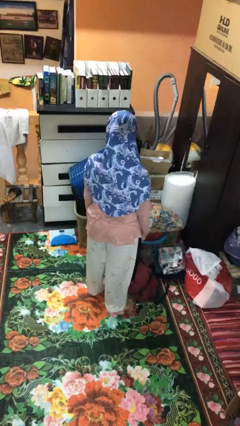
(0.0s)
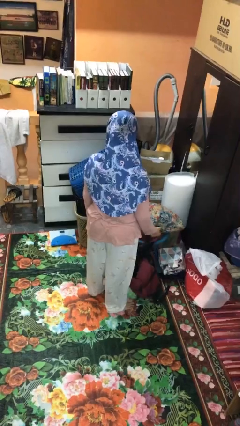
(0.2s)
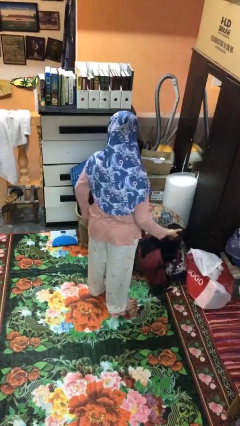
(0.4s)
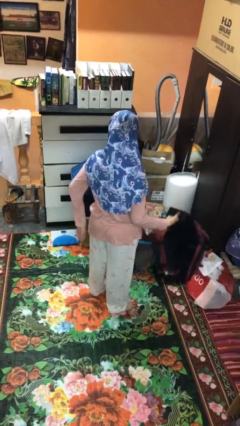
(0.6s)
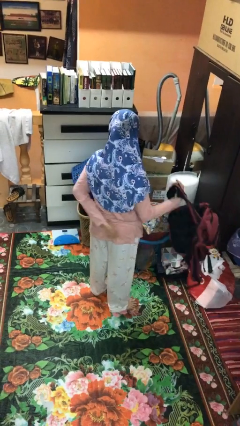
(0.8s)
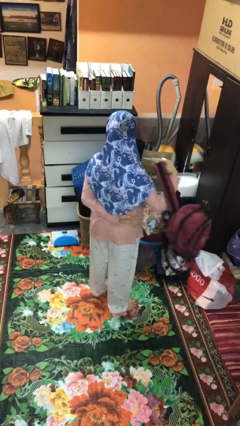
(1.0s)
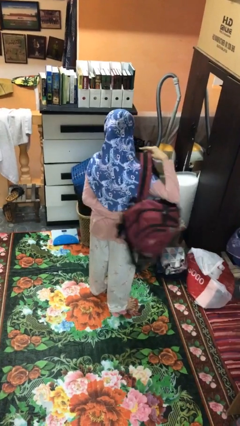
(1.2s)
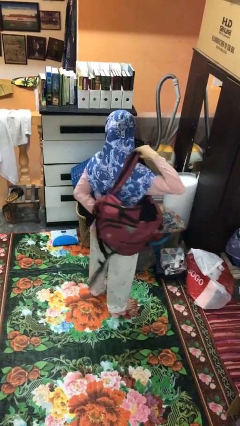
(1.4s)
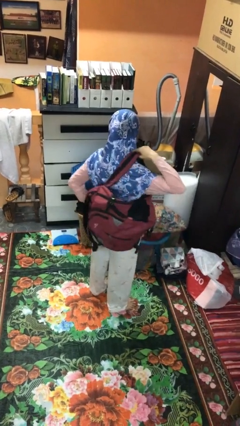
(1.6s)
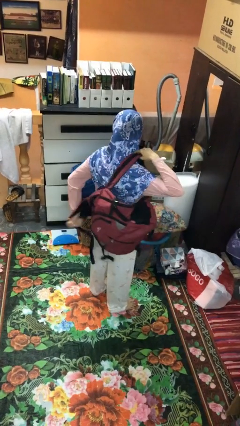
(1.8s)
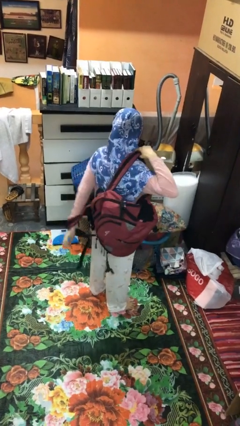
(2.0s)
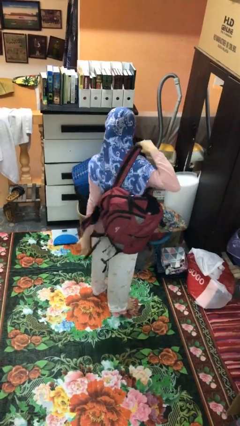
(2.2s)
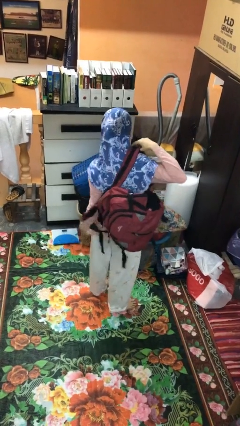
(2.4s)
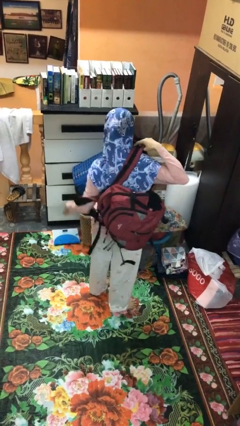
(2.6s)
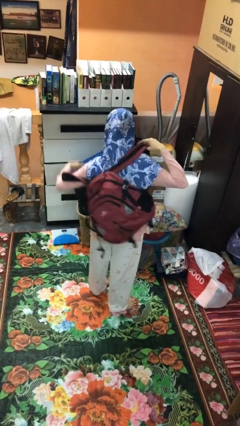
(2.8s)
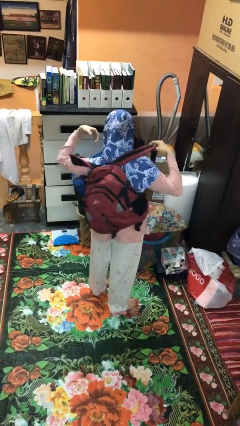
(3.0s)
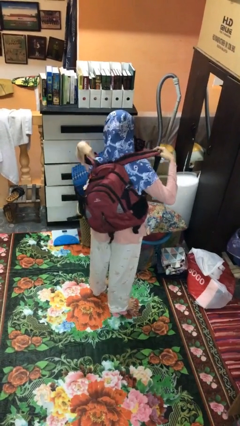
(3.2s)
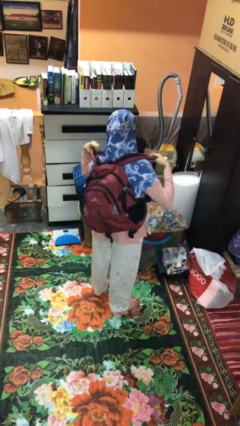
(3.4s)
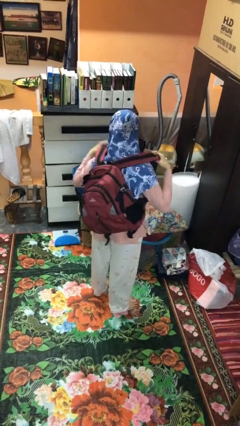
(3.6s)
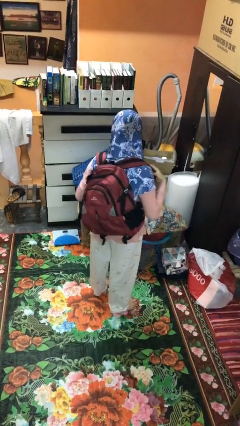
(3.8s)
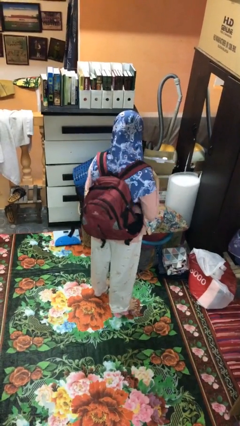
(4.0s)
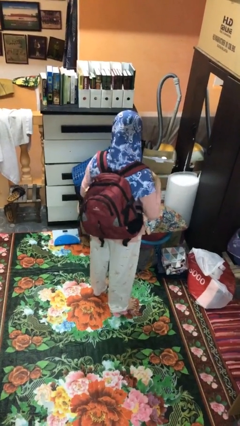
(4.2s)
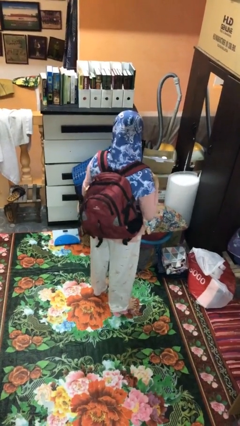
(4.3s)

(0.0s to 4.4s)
person puts on backpack

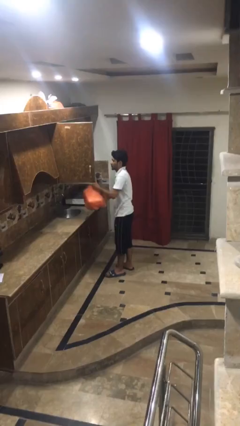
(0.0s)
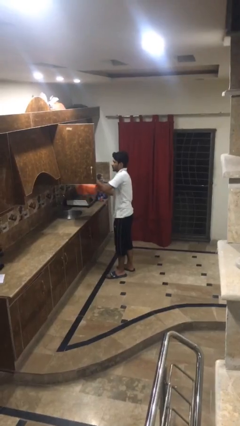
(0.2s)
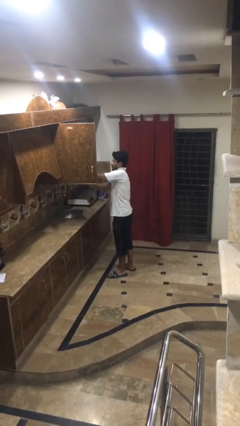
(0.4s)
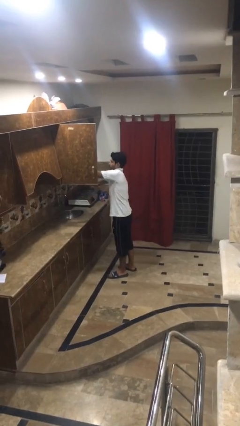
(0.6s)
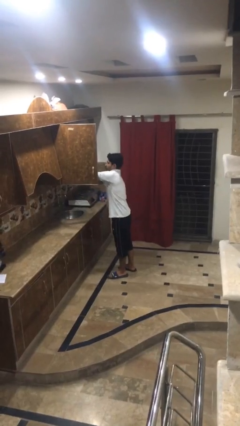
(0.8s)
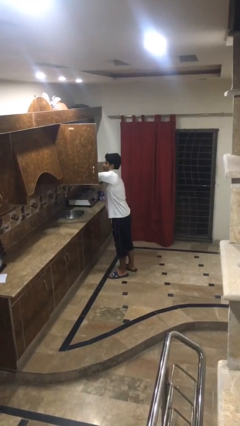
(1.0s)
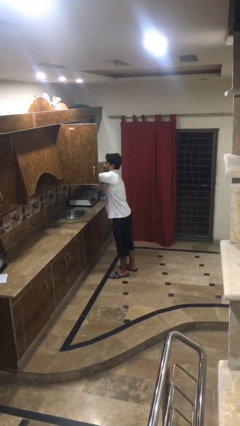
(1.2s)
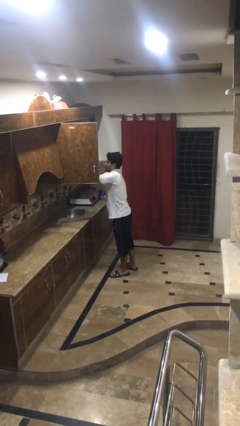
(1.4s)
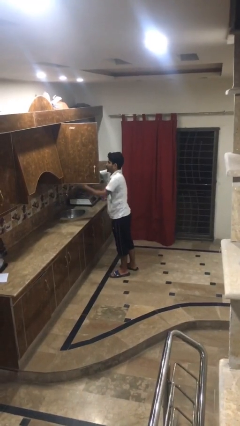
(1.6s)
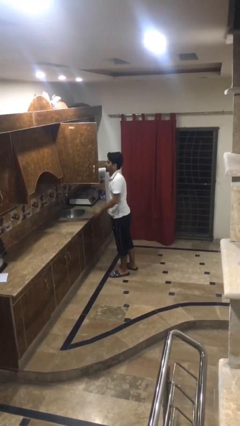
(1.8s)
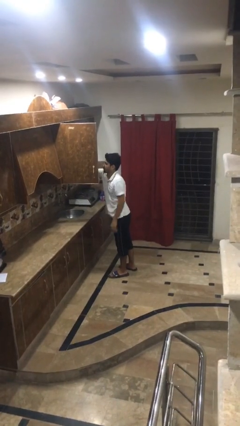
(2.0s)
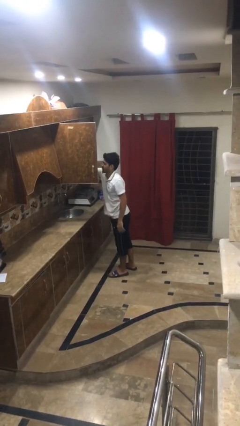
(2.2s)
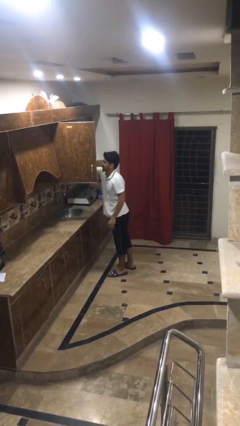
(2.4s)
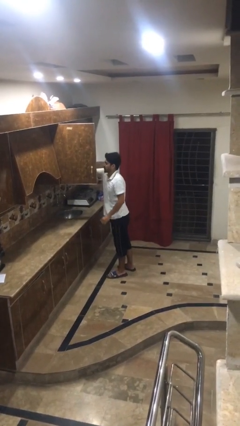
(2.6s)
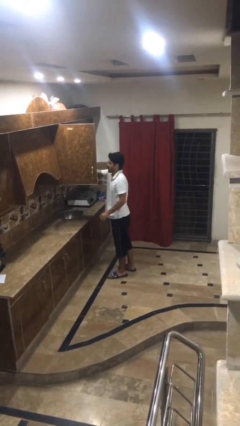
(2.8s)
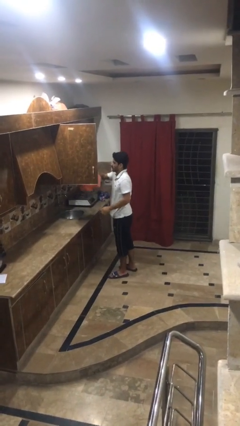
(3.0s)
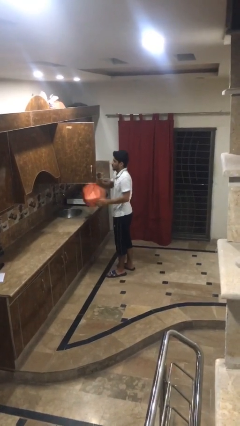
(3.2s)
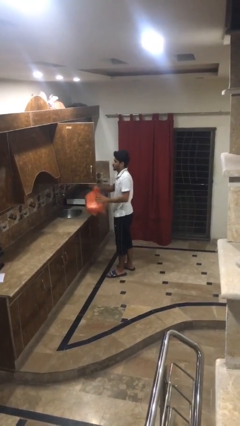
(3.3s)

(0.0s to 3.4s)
person loads groceries into cabinet

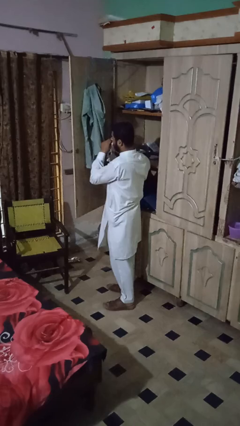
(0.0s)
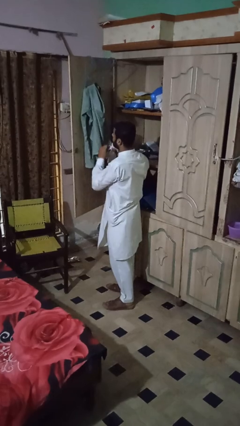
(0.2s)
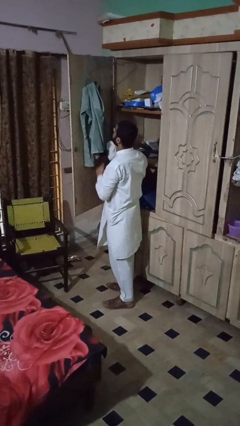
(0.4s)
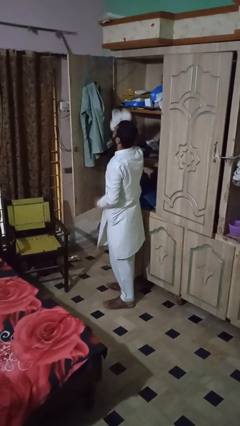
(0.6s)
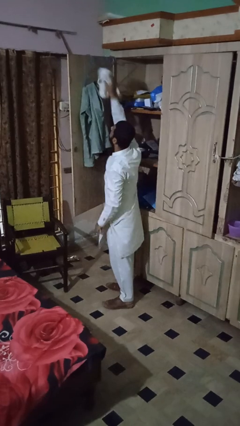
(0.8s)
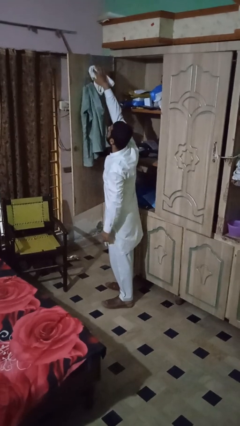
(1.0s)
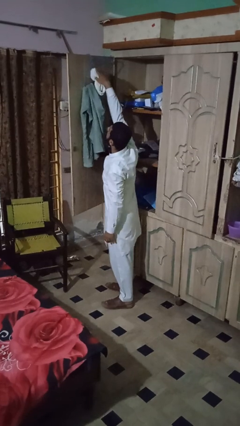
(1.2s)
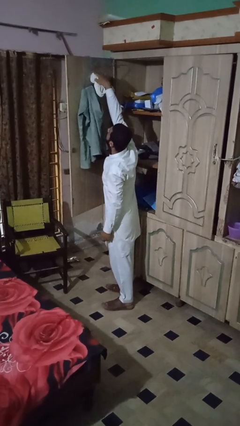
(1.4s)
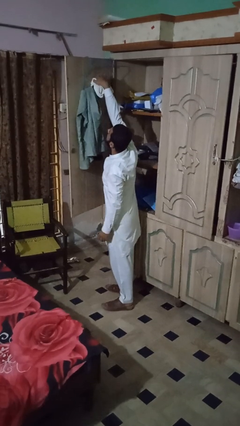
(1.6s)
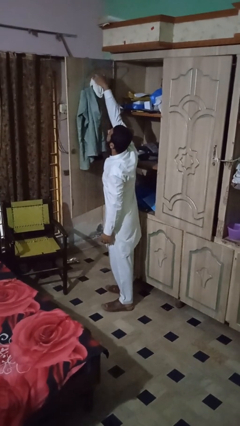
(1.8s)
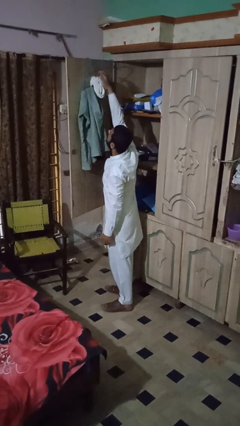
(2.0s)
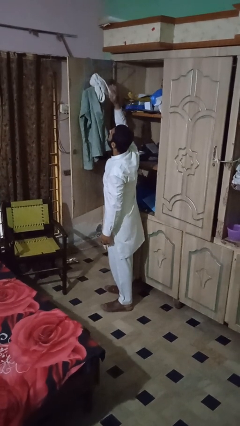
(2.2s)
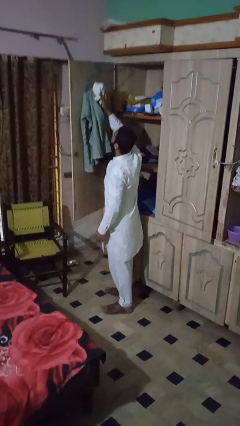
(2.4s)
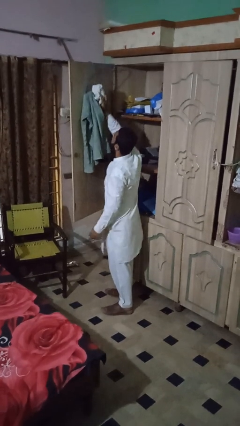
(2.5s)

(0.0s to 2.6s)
person puts clothes into closet

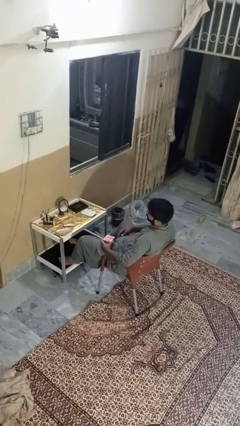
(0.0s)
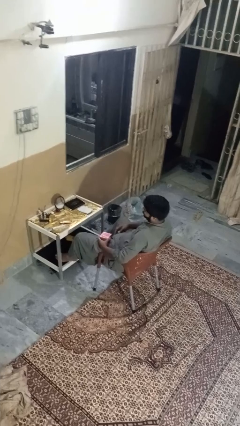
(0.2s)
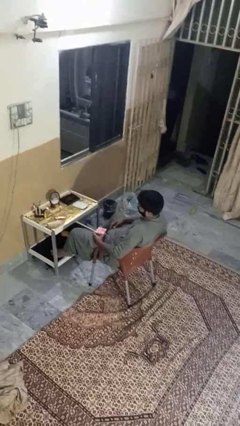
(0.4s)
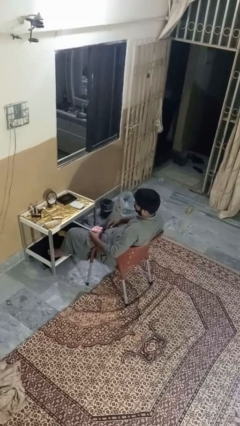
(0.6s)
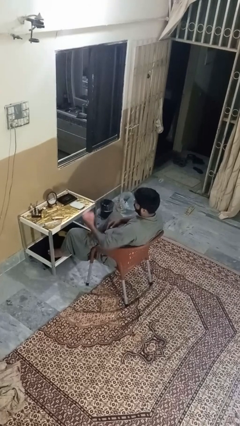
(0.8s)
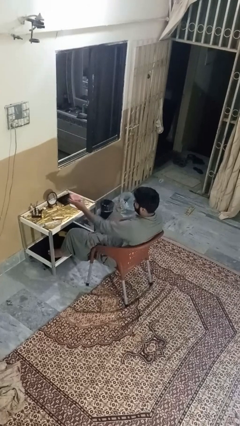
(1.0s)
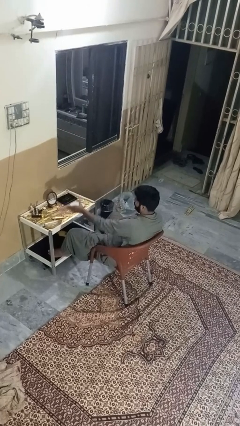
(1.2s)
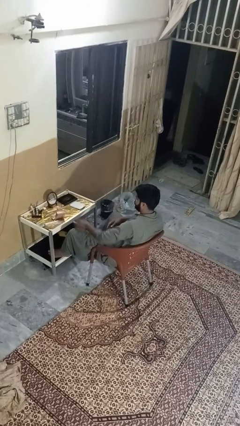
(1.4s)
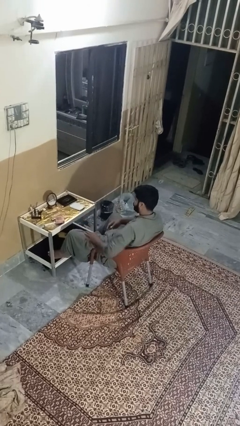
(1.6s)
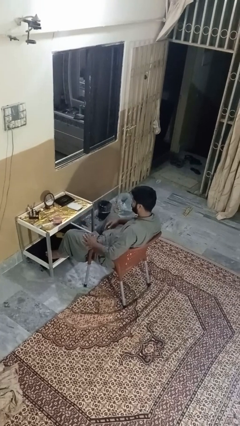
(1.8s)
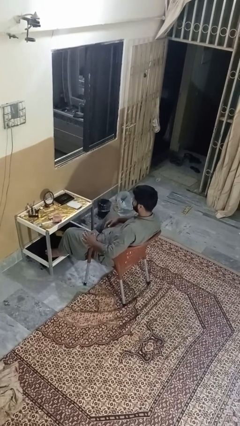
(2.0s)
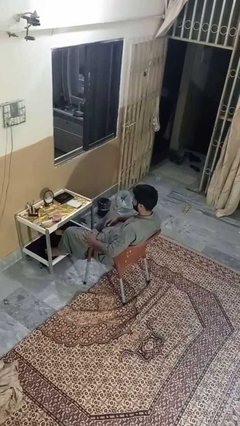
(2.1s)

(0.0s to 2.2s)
person throws object on table

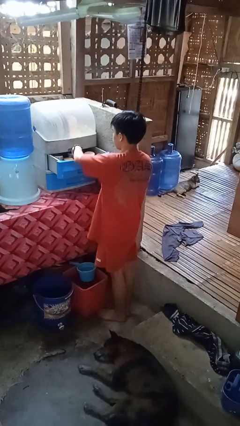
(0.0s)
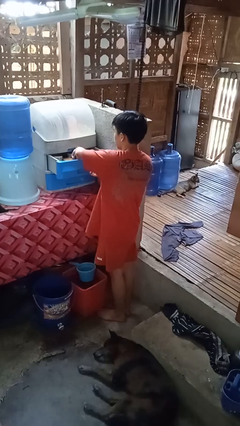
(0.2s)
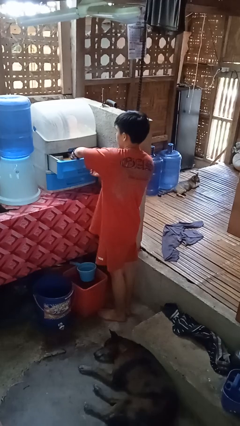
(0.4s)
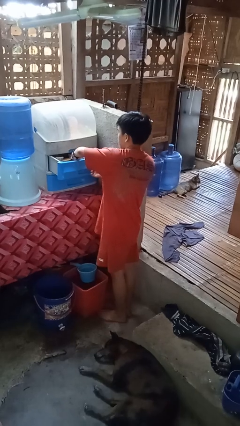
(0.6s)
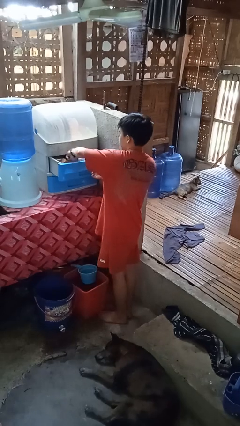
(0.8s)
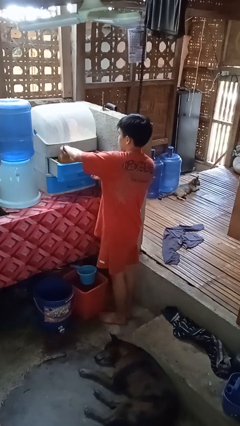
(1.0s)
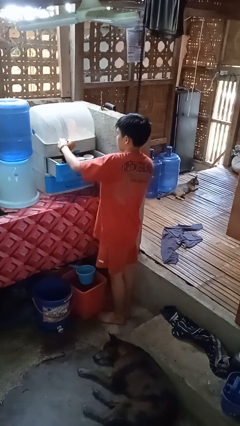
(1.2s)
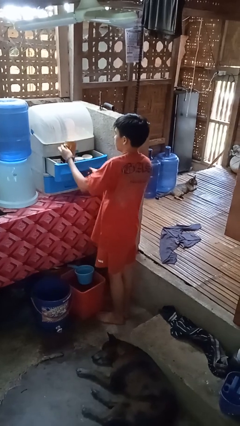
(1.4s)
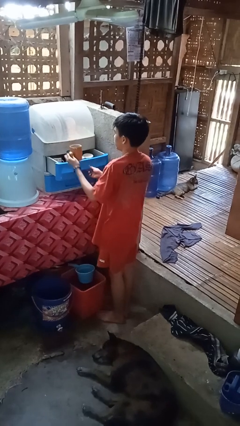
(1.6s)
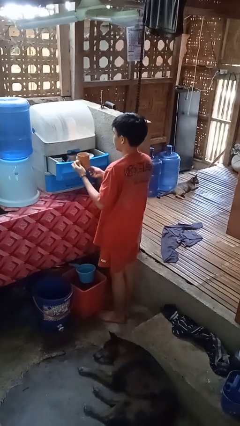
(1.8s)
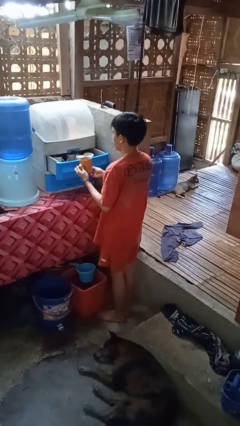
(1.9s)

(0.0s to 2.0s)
person picks up object from cabinet

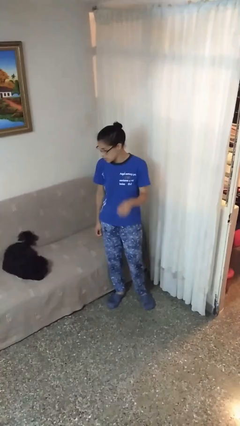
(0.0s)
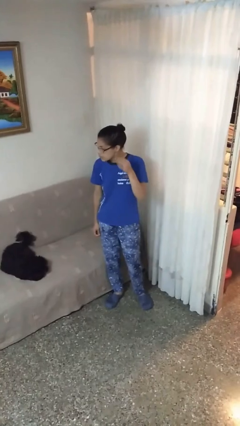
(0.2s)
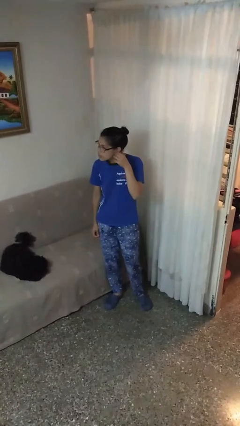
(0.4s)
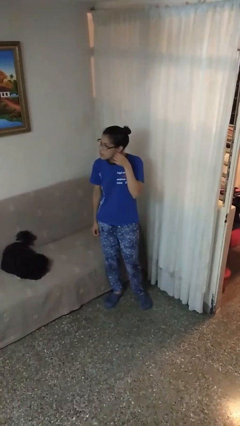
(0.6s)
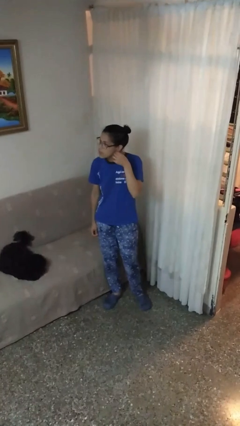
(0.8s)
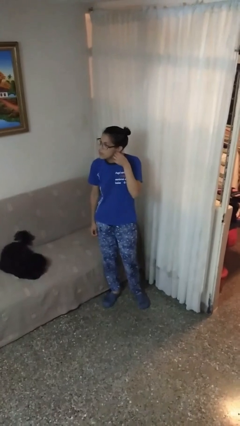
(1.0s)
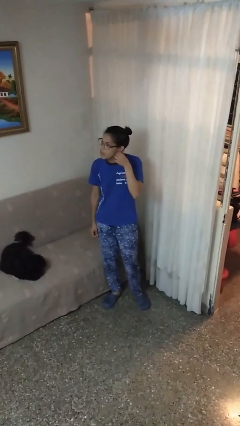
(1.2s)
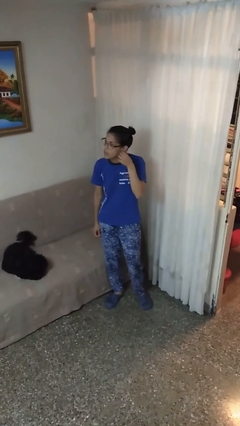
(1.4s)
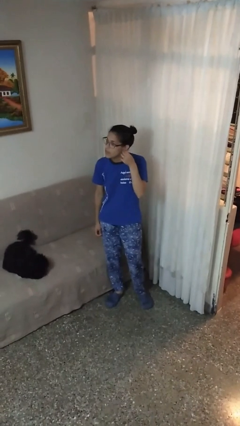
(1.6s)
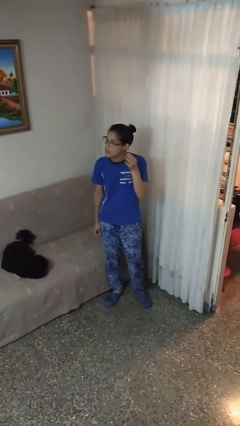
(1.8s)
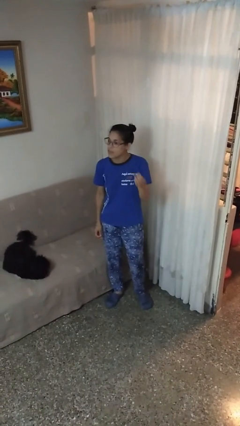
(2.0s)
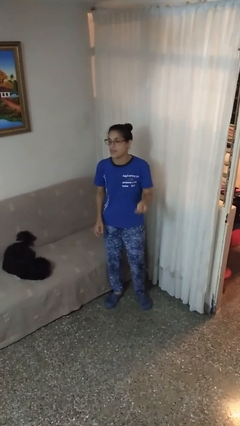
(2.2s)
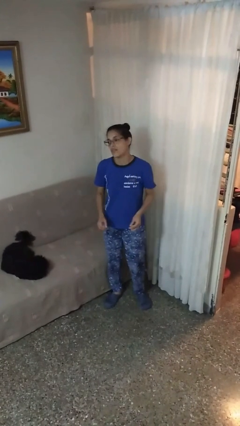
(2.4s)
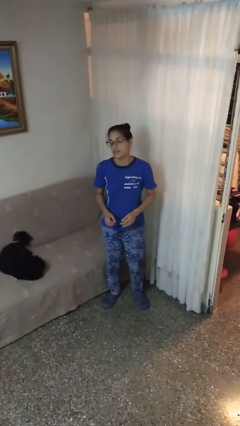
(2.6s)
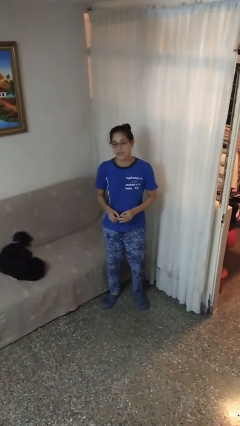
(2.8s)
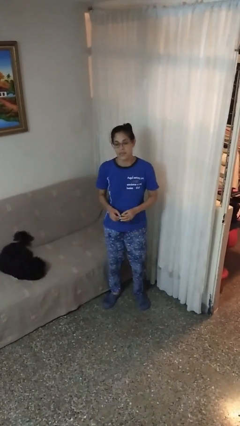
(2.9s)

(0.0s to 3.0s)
person takes off earrings
